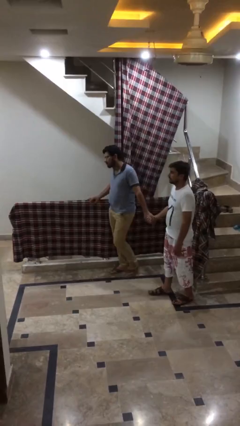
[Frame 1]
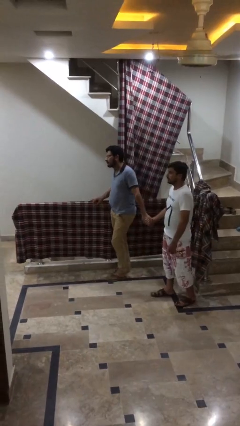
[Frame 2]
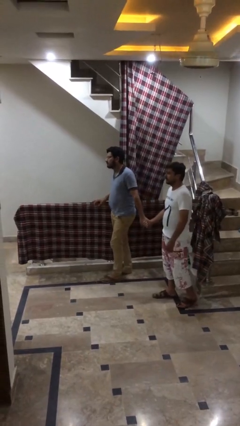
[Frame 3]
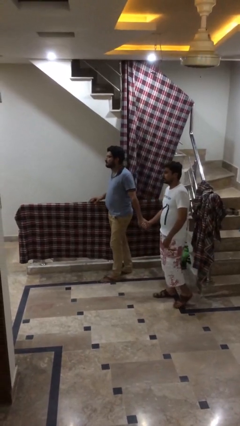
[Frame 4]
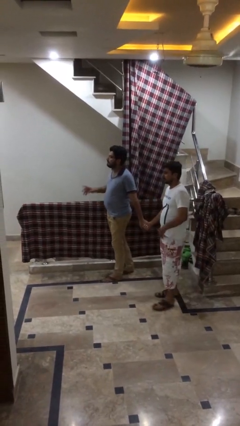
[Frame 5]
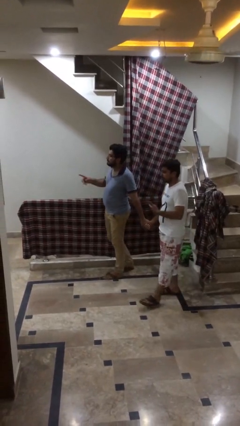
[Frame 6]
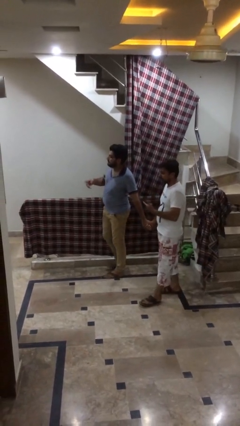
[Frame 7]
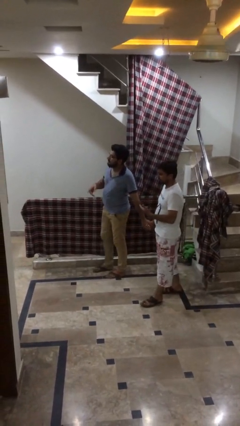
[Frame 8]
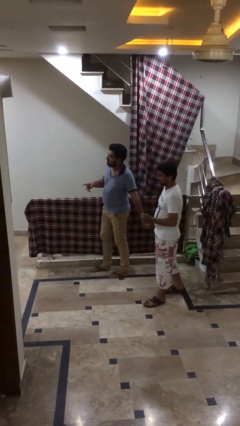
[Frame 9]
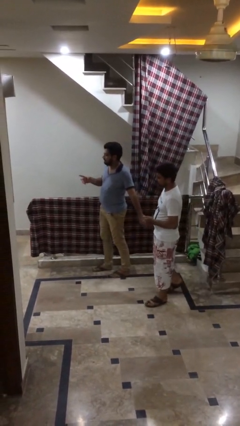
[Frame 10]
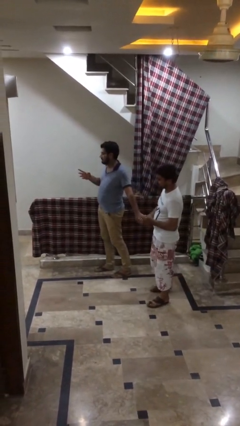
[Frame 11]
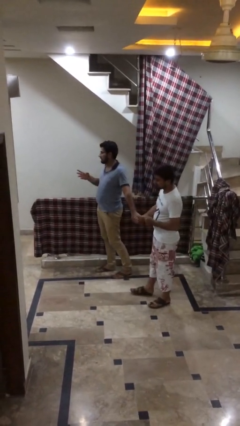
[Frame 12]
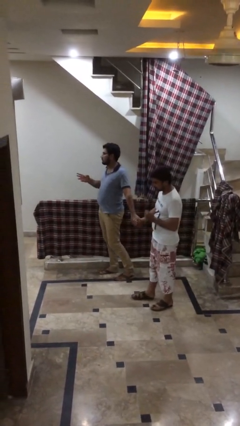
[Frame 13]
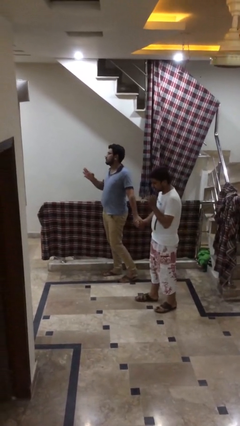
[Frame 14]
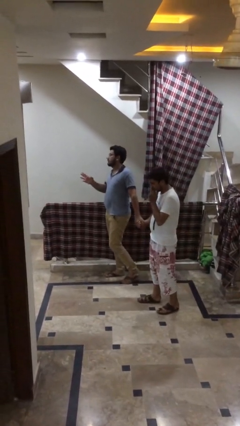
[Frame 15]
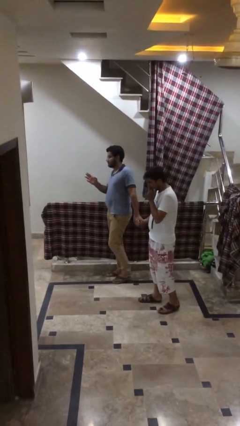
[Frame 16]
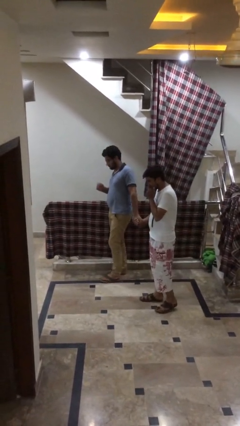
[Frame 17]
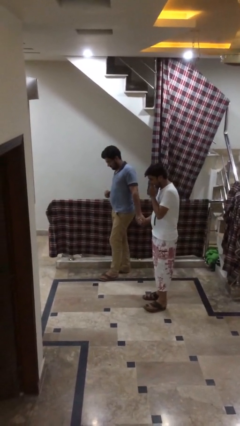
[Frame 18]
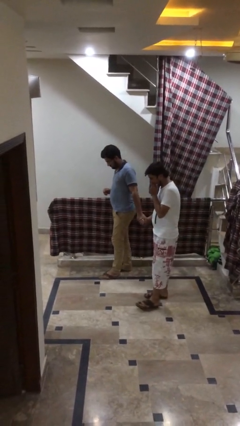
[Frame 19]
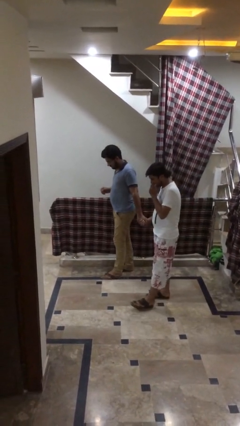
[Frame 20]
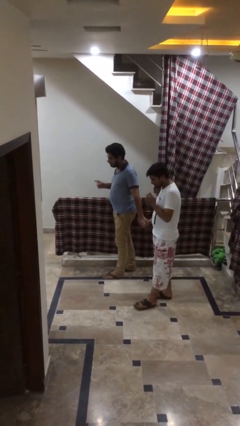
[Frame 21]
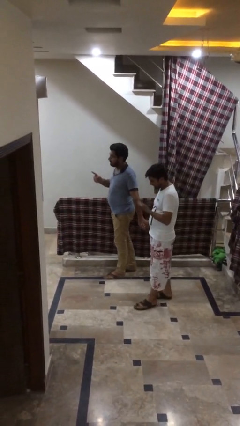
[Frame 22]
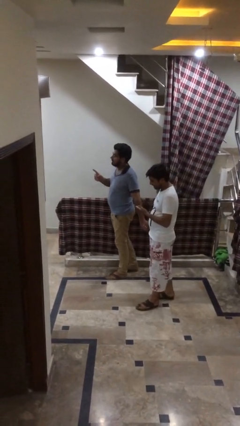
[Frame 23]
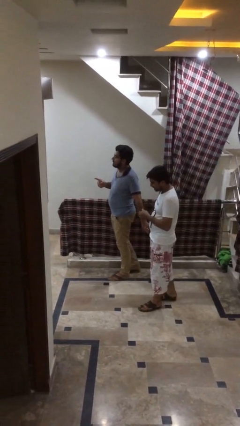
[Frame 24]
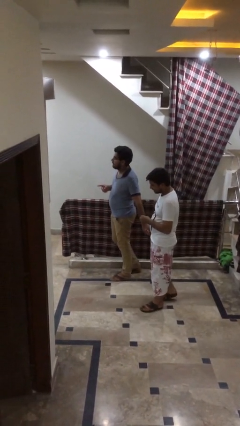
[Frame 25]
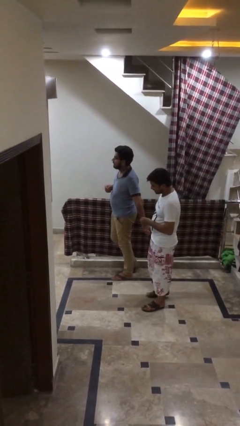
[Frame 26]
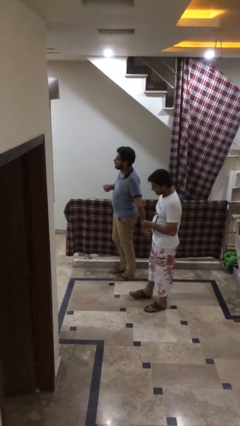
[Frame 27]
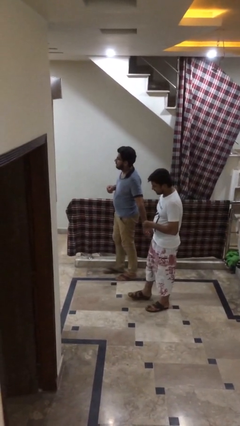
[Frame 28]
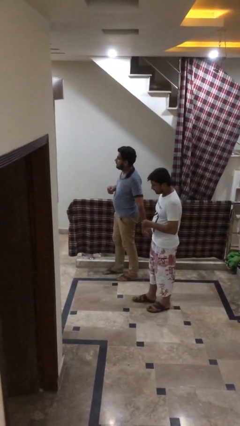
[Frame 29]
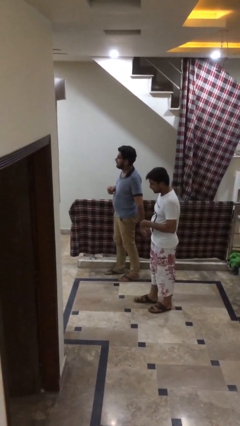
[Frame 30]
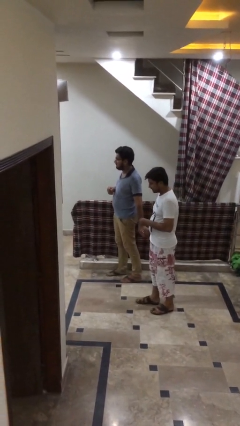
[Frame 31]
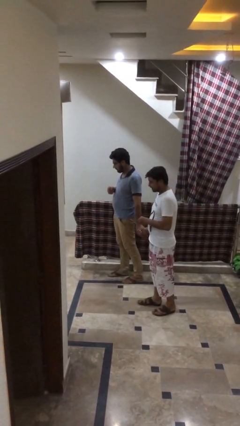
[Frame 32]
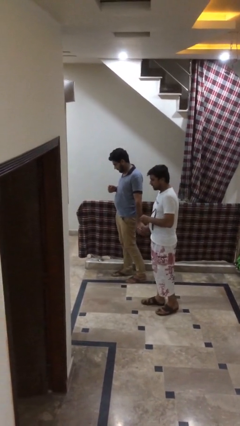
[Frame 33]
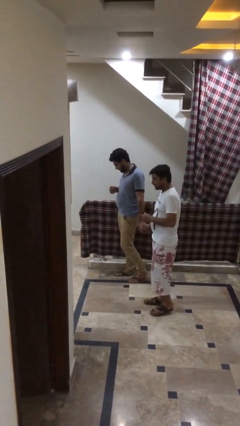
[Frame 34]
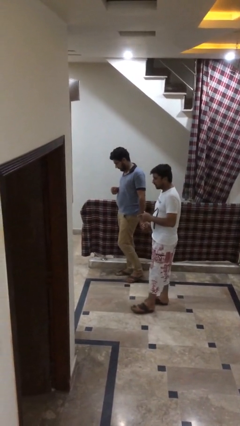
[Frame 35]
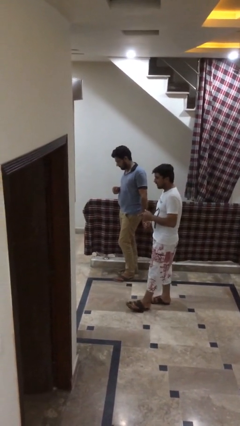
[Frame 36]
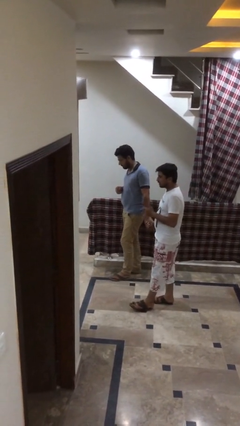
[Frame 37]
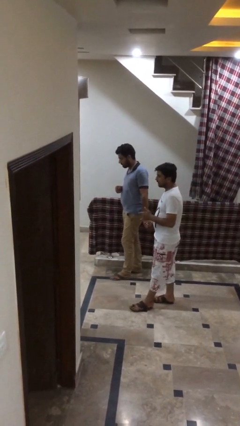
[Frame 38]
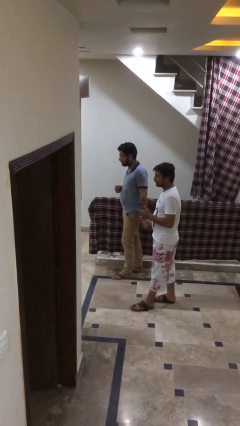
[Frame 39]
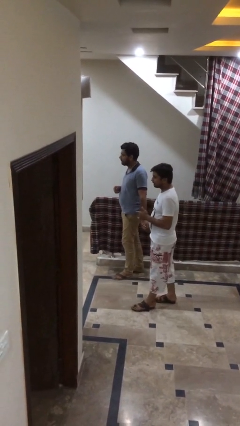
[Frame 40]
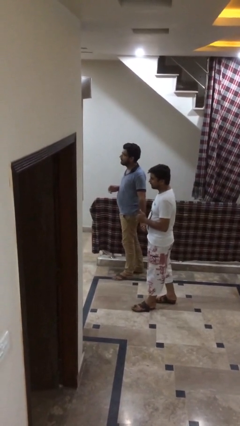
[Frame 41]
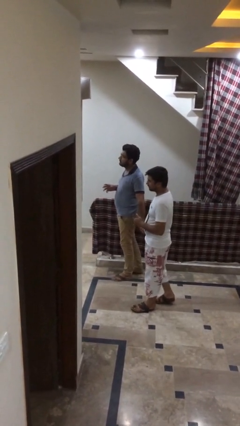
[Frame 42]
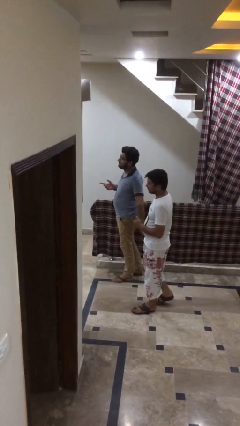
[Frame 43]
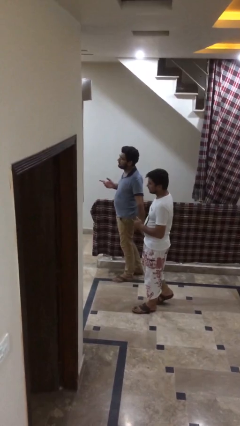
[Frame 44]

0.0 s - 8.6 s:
person holds hand

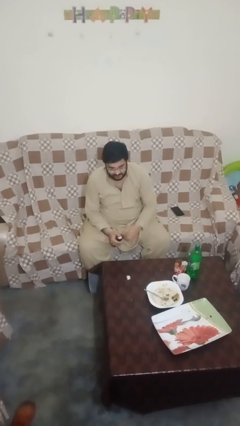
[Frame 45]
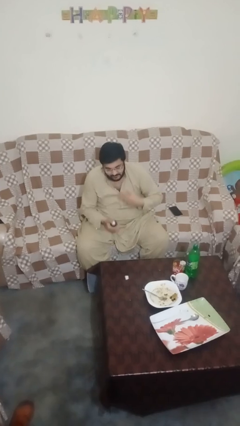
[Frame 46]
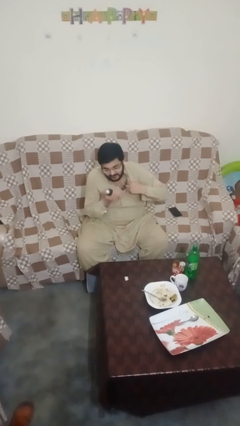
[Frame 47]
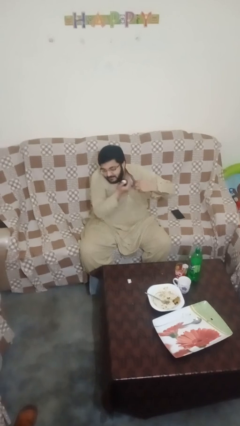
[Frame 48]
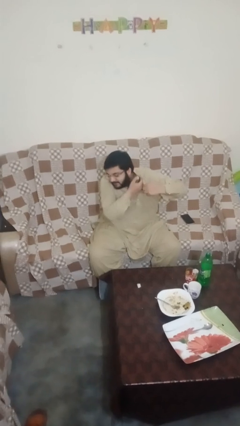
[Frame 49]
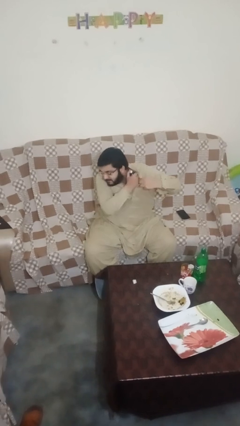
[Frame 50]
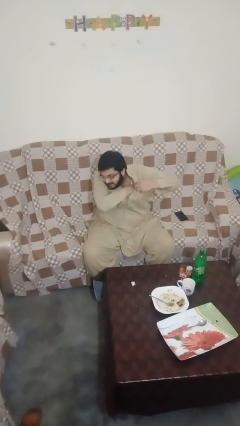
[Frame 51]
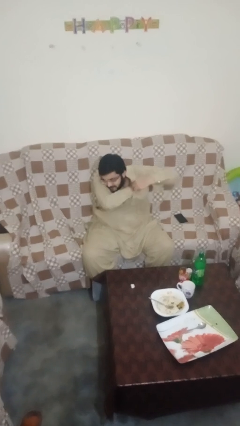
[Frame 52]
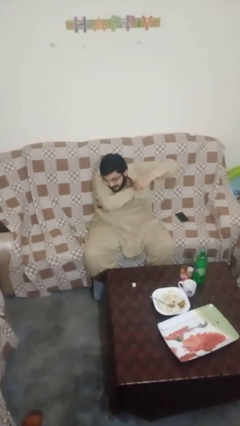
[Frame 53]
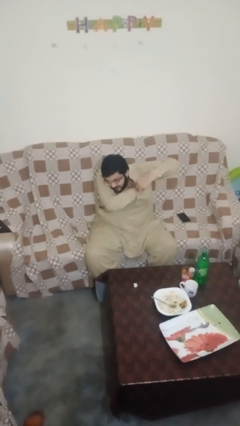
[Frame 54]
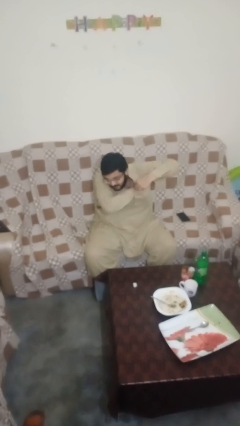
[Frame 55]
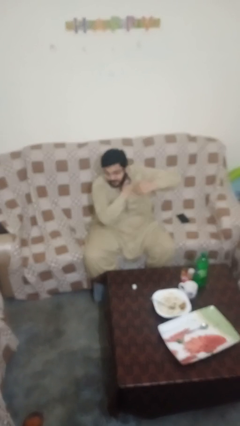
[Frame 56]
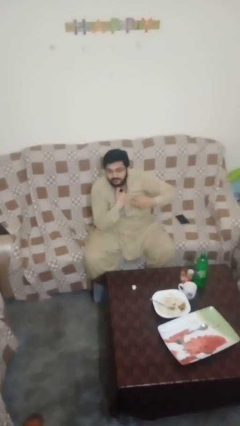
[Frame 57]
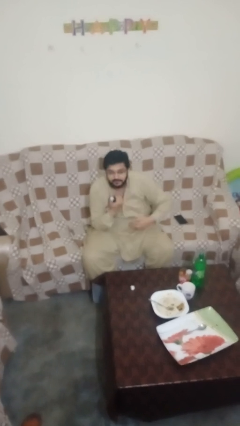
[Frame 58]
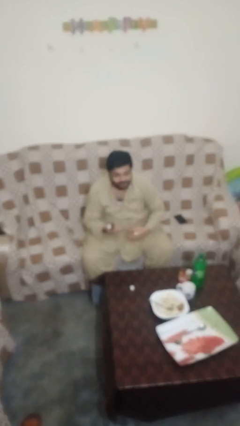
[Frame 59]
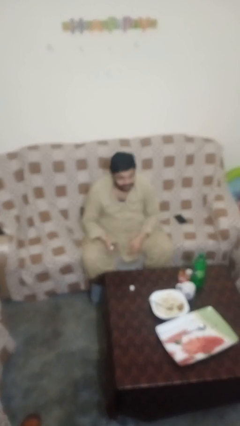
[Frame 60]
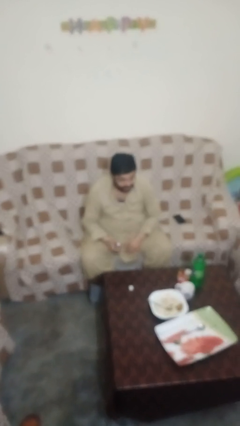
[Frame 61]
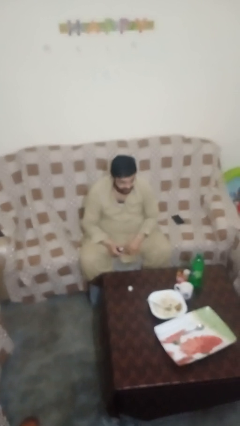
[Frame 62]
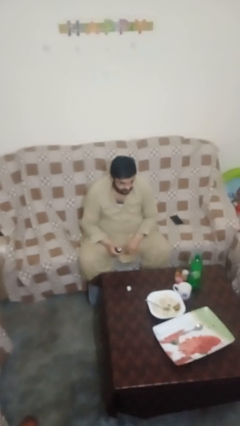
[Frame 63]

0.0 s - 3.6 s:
person applies deodorant

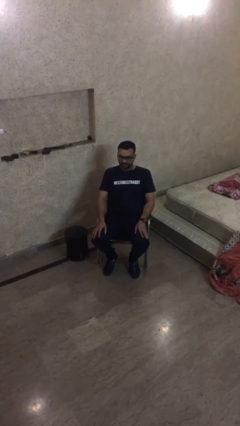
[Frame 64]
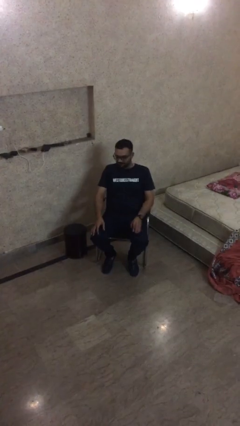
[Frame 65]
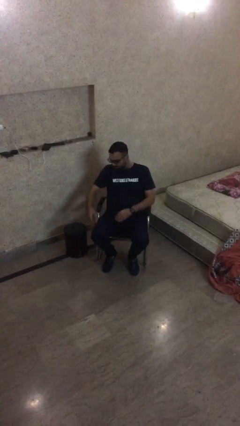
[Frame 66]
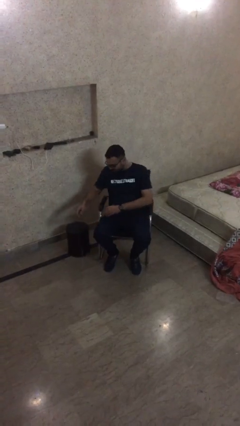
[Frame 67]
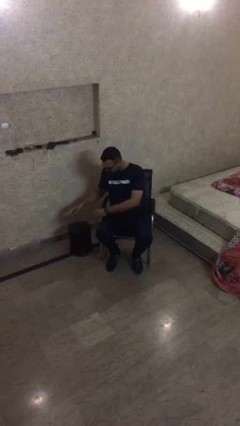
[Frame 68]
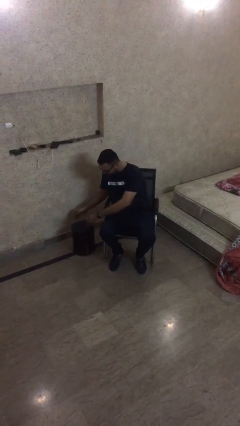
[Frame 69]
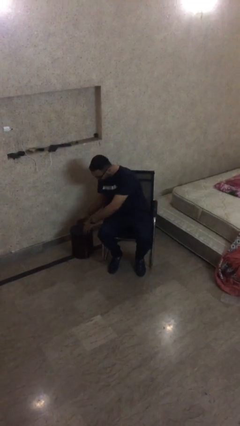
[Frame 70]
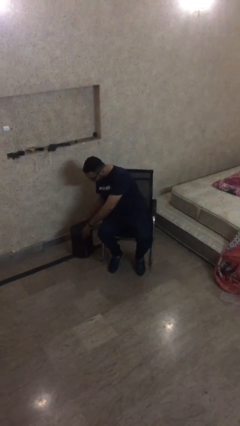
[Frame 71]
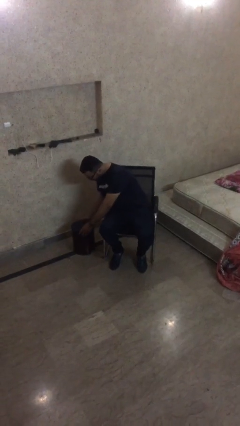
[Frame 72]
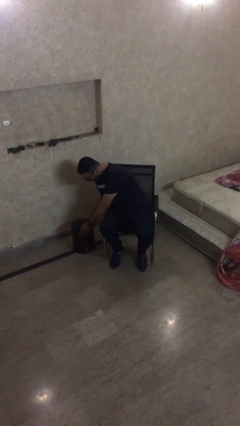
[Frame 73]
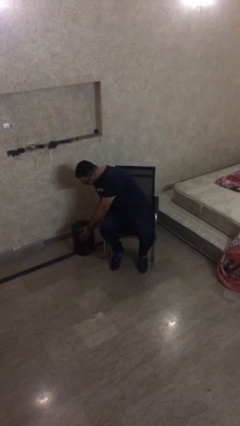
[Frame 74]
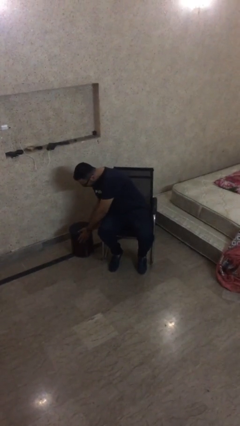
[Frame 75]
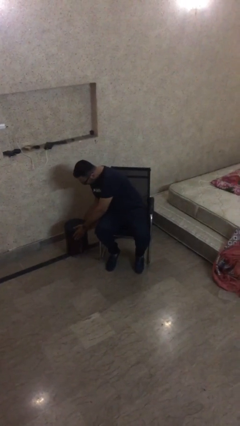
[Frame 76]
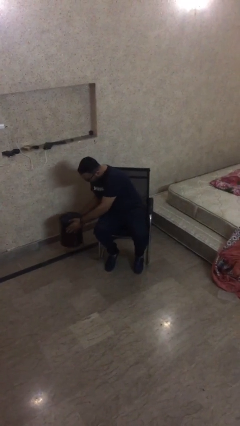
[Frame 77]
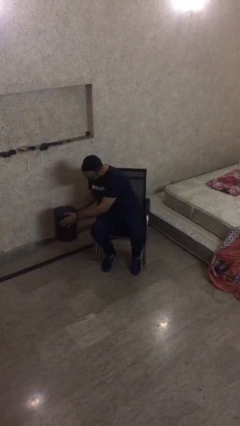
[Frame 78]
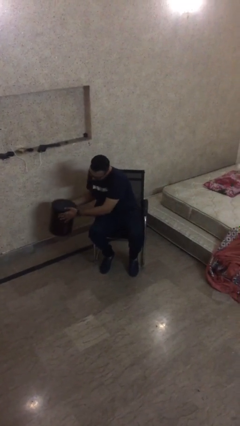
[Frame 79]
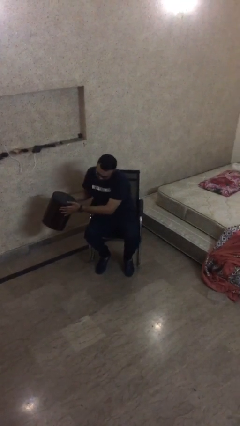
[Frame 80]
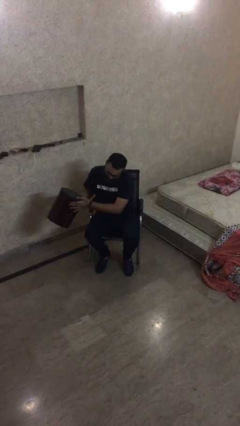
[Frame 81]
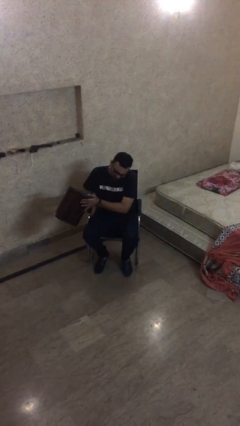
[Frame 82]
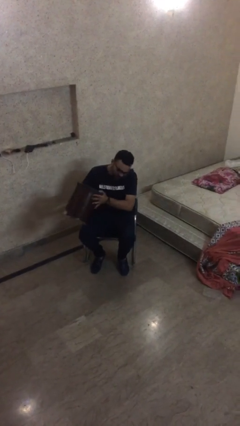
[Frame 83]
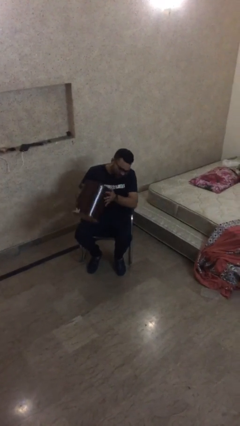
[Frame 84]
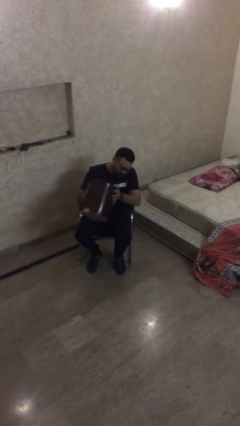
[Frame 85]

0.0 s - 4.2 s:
person picks up object from floor

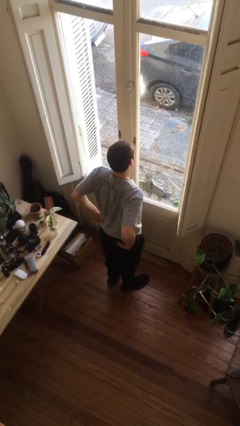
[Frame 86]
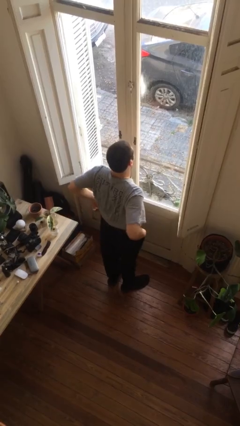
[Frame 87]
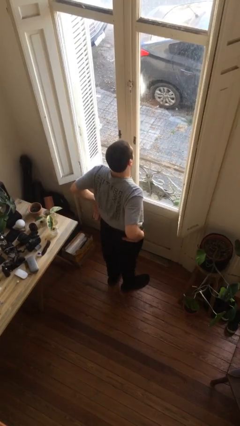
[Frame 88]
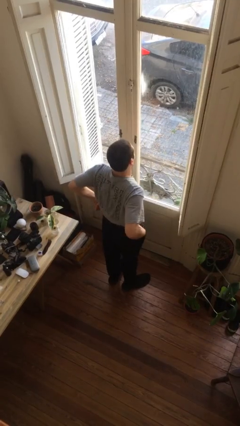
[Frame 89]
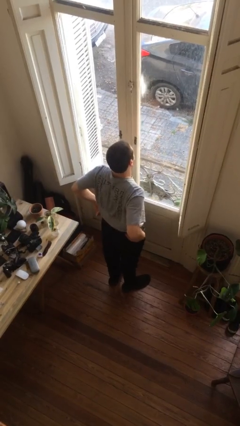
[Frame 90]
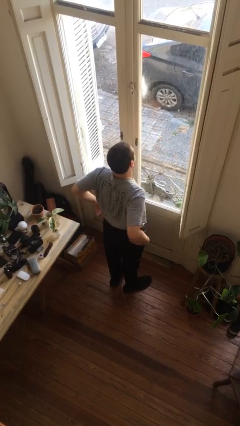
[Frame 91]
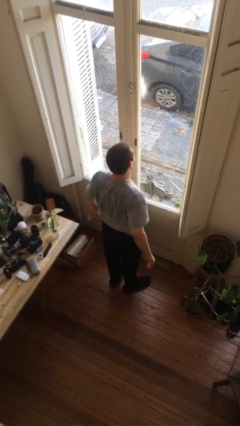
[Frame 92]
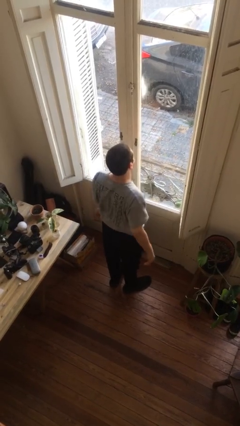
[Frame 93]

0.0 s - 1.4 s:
person hikes up pants
